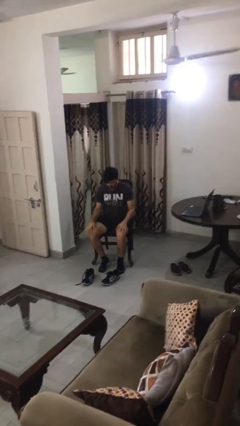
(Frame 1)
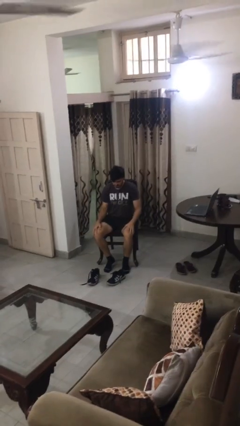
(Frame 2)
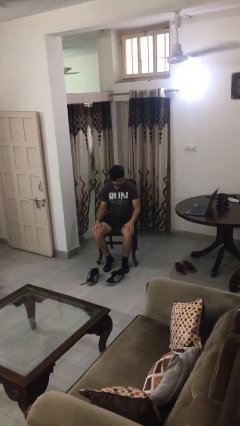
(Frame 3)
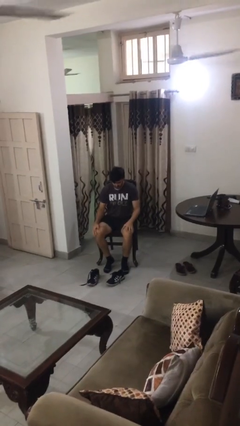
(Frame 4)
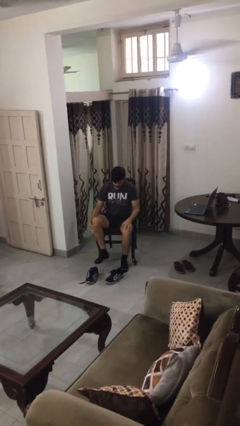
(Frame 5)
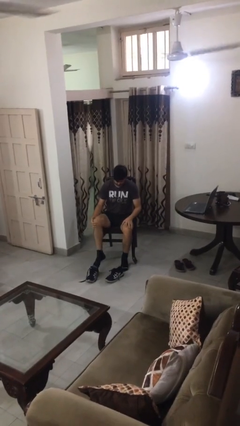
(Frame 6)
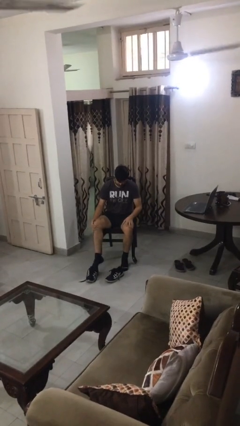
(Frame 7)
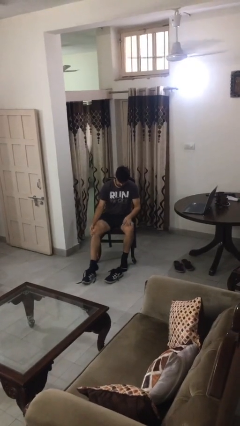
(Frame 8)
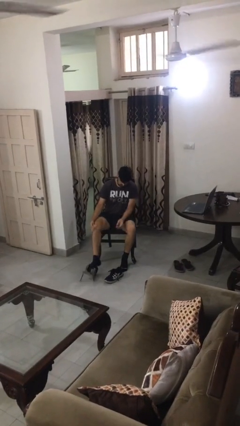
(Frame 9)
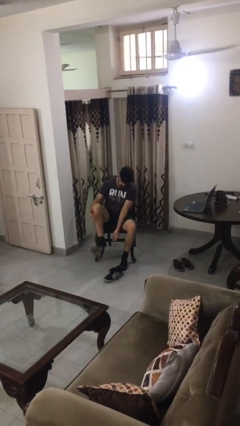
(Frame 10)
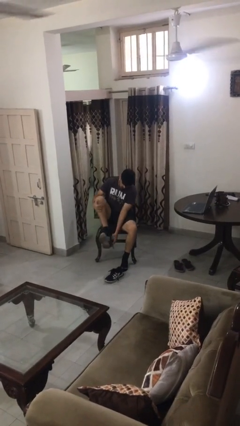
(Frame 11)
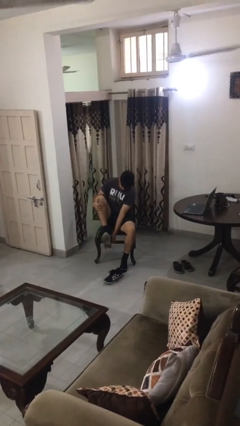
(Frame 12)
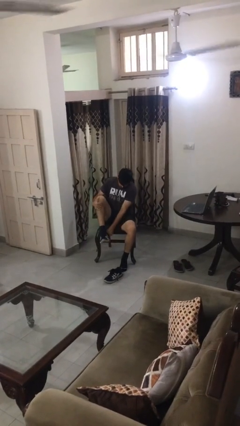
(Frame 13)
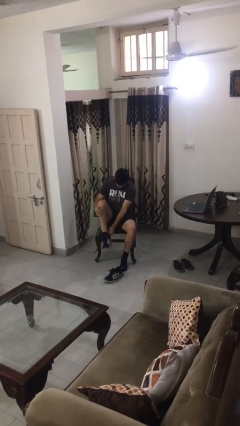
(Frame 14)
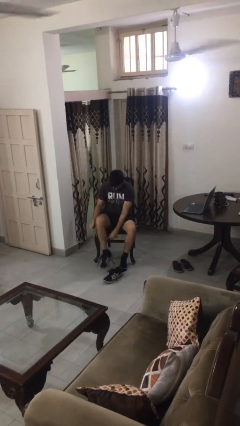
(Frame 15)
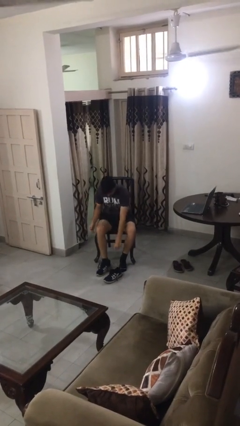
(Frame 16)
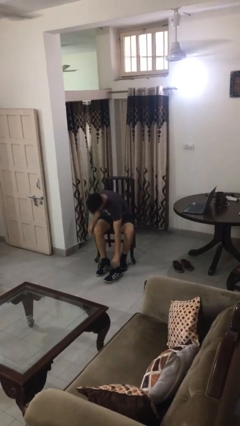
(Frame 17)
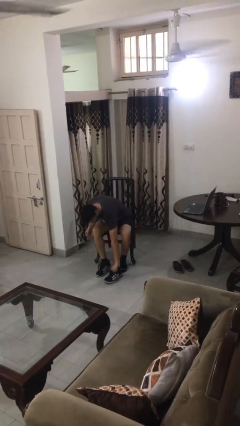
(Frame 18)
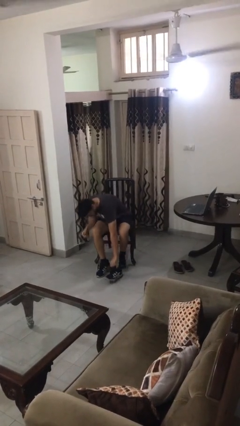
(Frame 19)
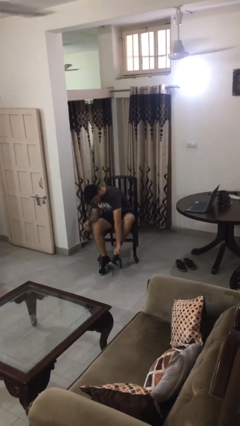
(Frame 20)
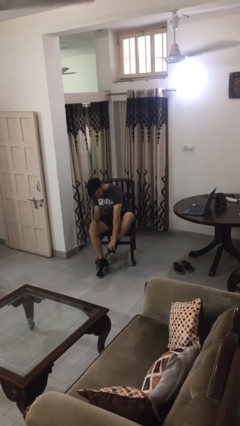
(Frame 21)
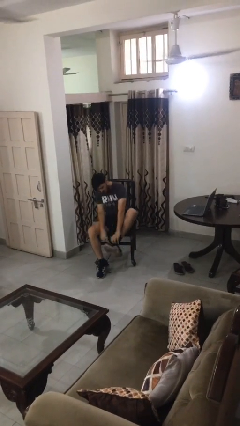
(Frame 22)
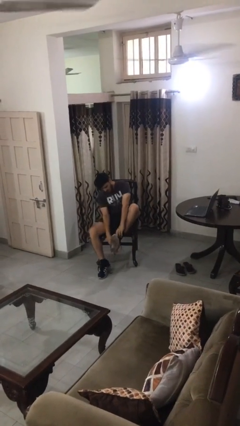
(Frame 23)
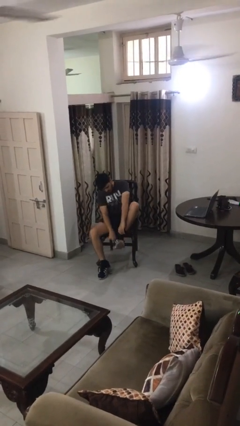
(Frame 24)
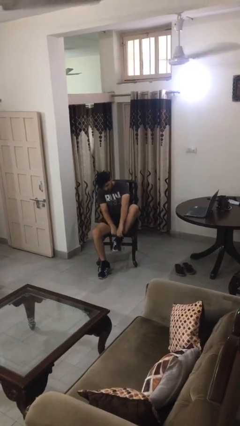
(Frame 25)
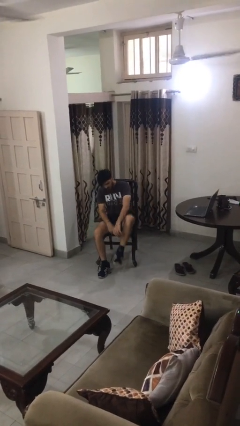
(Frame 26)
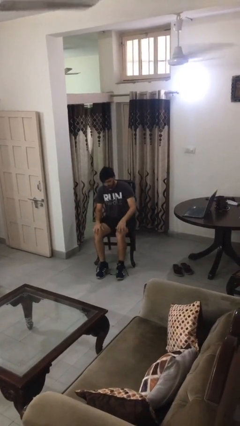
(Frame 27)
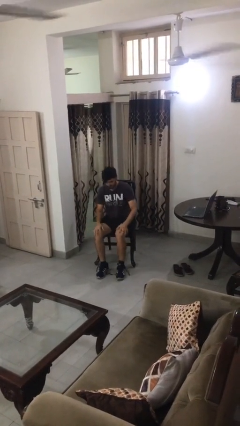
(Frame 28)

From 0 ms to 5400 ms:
person puts on shoes

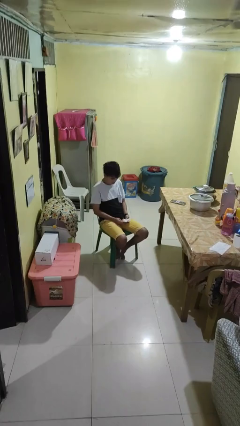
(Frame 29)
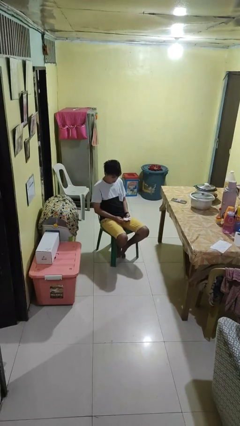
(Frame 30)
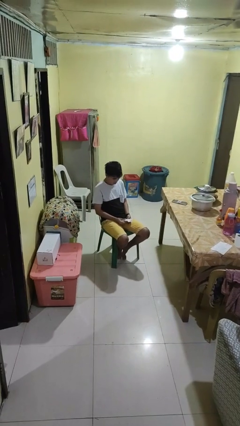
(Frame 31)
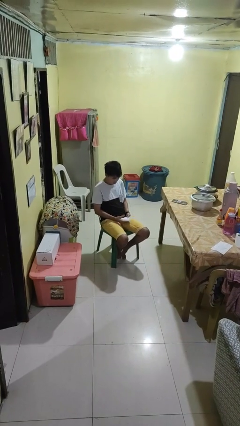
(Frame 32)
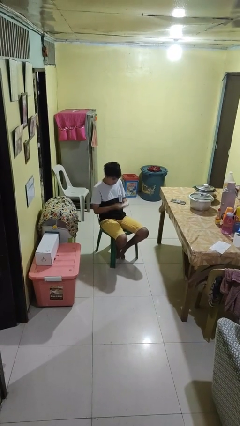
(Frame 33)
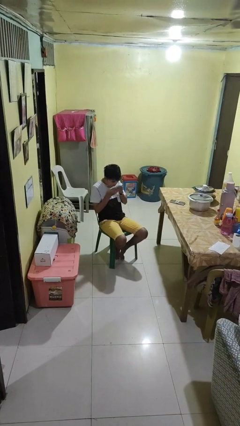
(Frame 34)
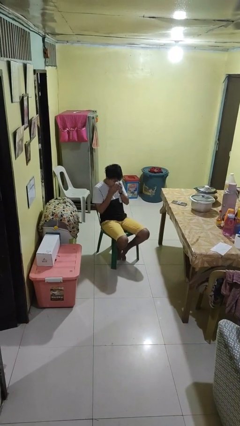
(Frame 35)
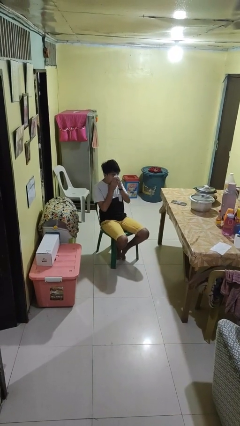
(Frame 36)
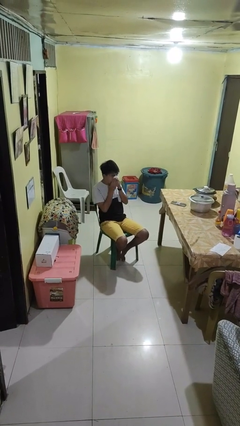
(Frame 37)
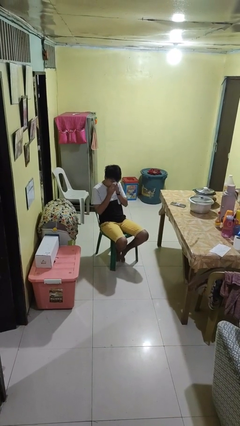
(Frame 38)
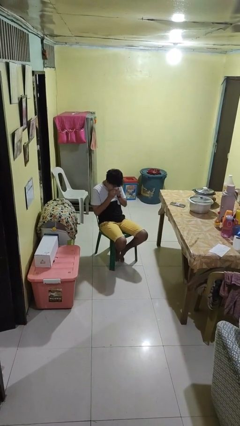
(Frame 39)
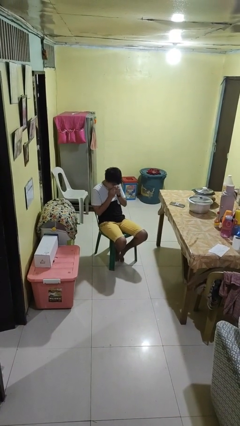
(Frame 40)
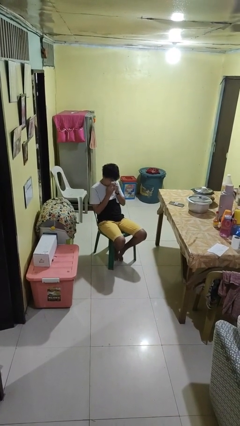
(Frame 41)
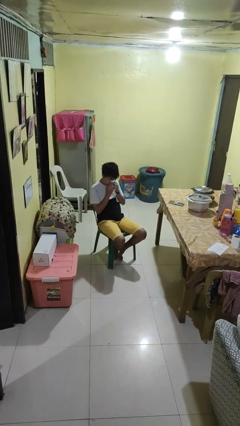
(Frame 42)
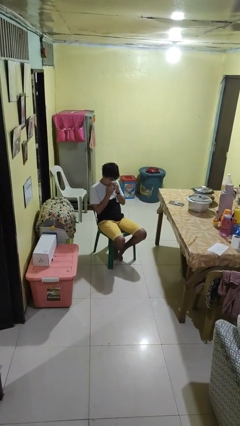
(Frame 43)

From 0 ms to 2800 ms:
person blows nose

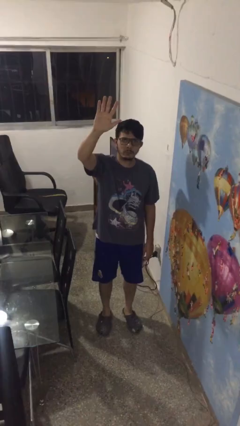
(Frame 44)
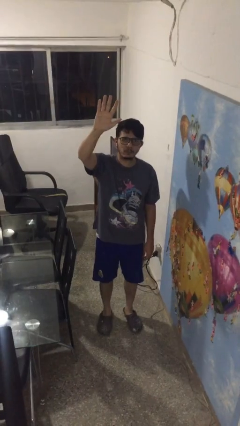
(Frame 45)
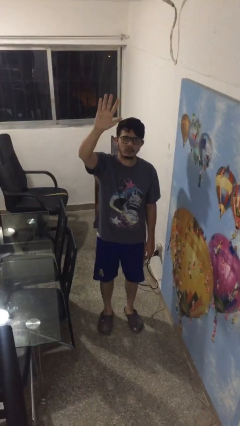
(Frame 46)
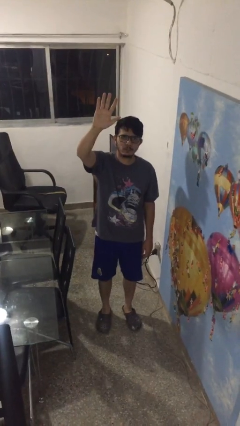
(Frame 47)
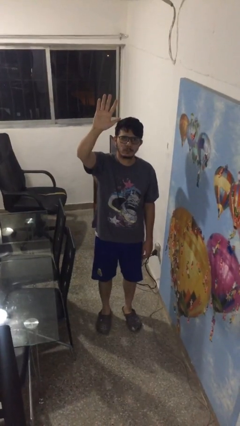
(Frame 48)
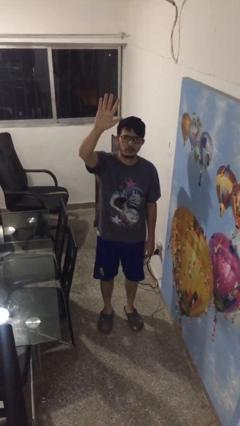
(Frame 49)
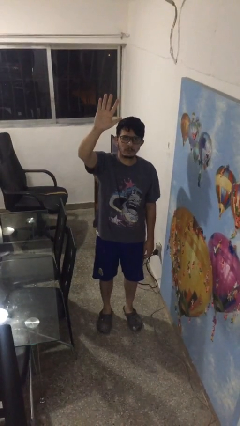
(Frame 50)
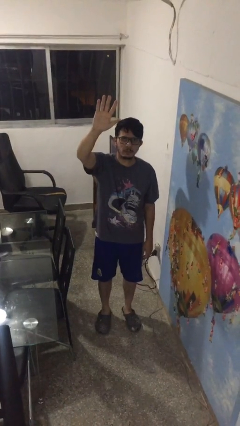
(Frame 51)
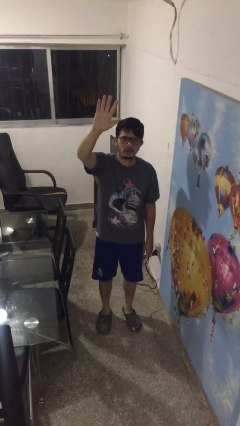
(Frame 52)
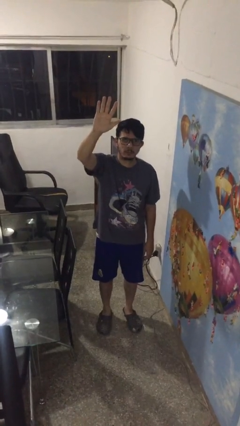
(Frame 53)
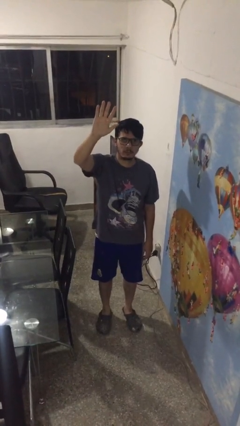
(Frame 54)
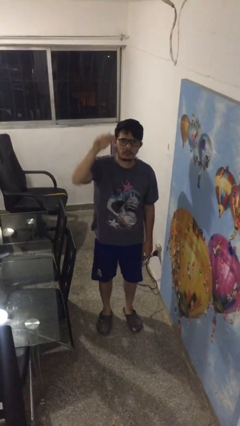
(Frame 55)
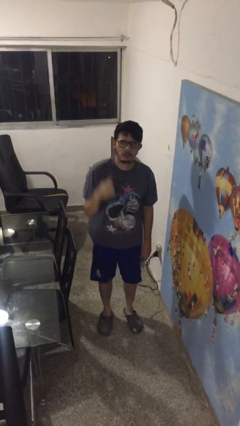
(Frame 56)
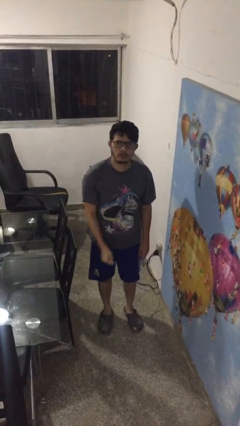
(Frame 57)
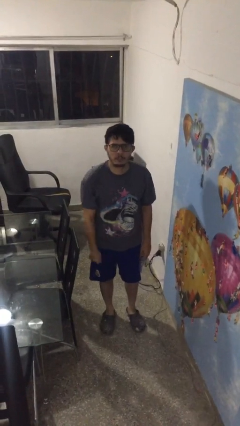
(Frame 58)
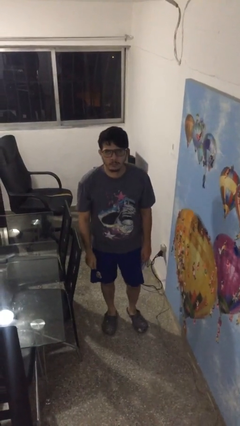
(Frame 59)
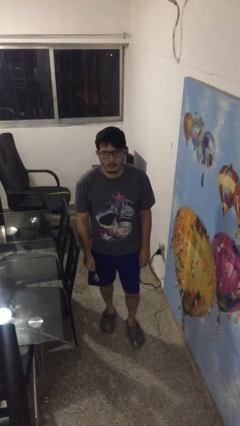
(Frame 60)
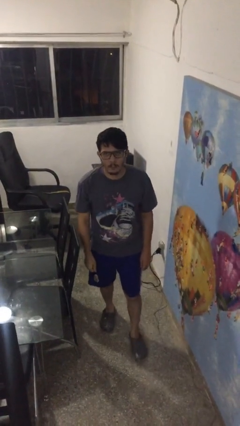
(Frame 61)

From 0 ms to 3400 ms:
person gestures lower hand

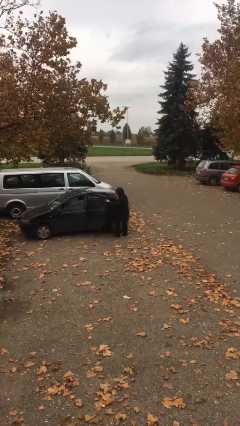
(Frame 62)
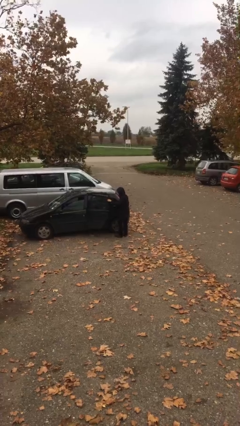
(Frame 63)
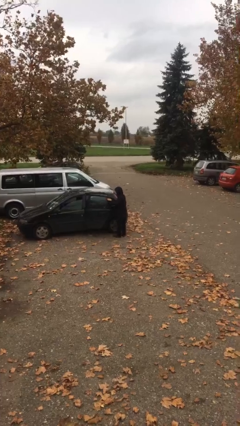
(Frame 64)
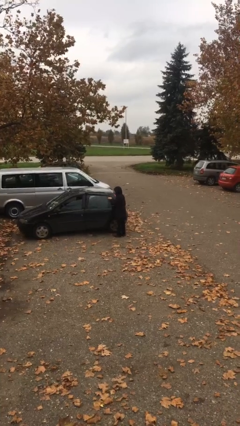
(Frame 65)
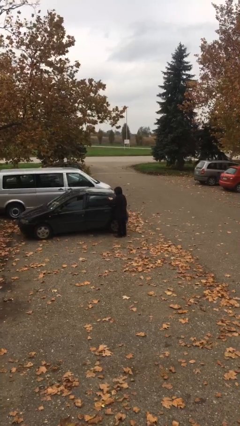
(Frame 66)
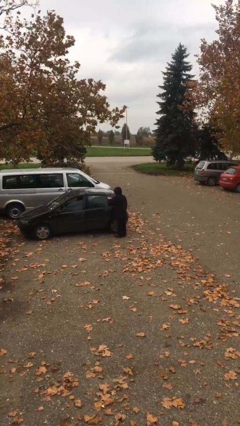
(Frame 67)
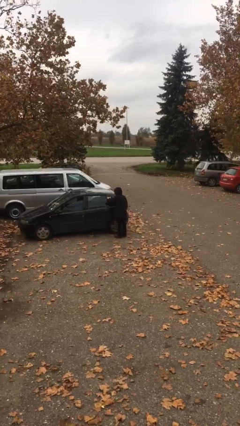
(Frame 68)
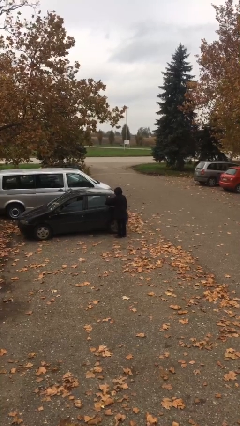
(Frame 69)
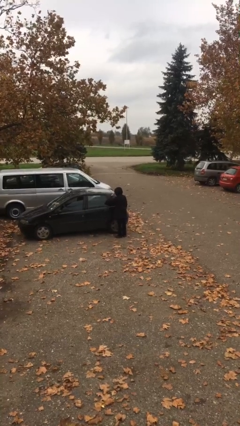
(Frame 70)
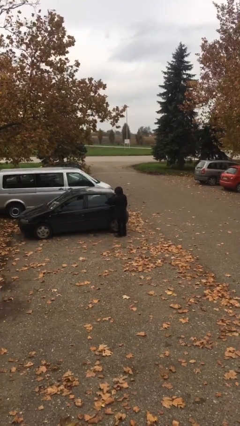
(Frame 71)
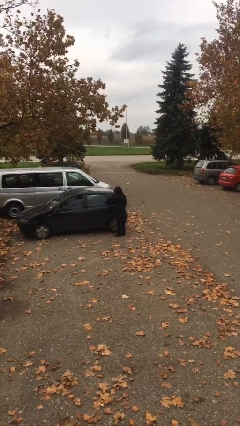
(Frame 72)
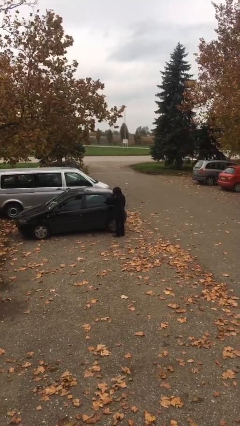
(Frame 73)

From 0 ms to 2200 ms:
person closes car door

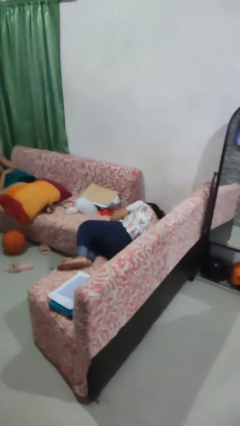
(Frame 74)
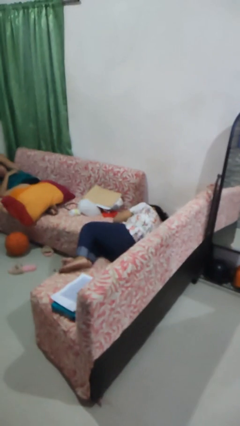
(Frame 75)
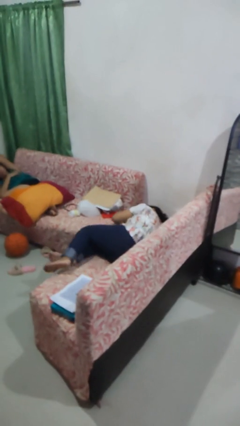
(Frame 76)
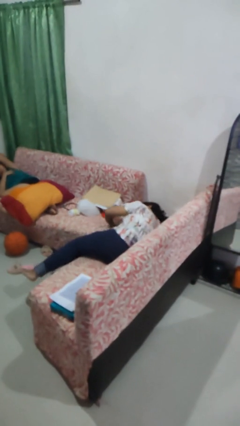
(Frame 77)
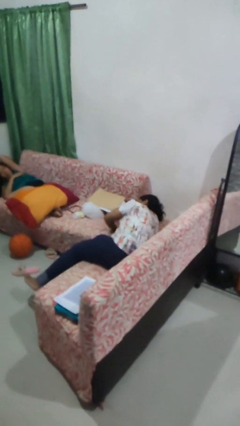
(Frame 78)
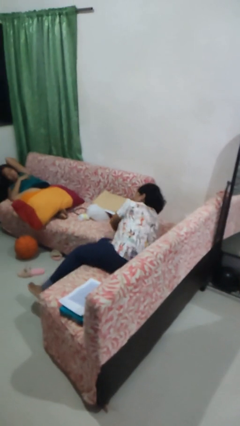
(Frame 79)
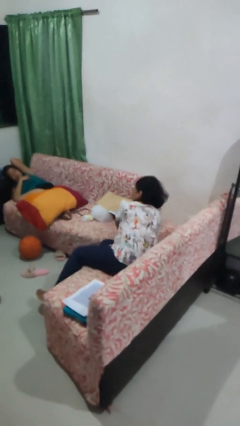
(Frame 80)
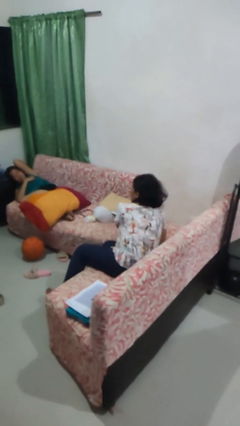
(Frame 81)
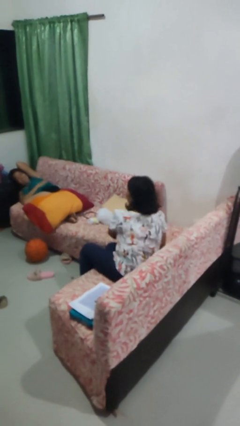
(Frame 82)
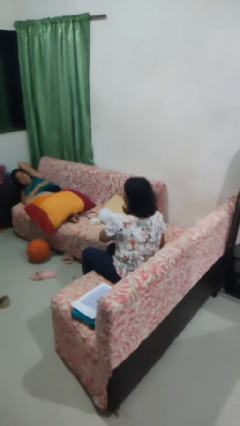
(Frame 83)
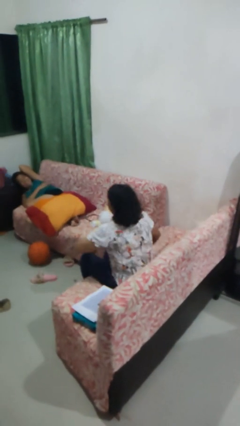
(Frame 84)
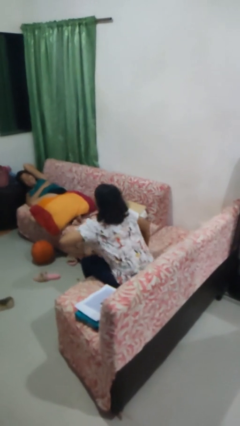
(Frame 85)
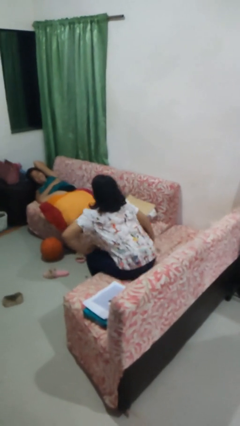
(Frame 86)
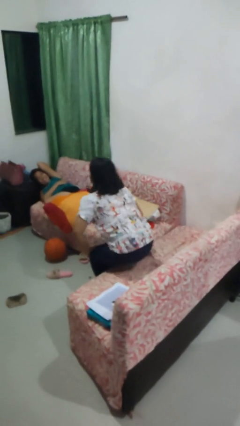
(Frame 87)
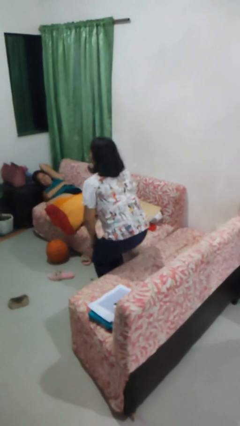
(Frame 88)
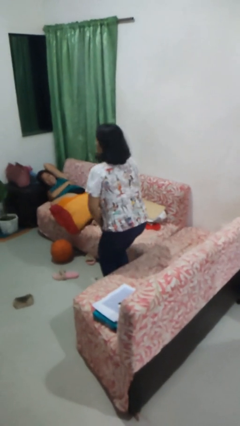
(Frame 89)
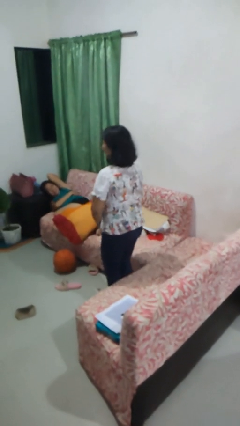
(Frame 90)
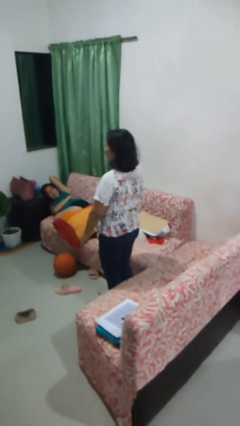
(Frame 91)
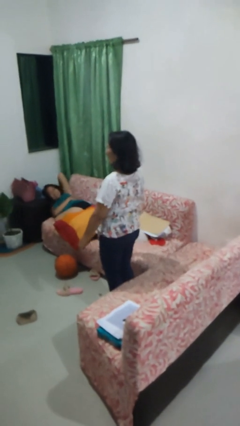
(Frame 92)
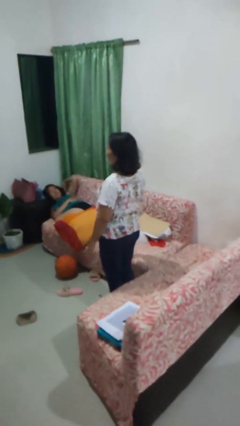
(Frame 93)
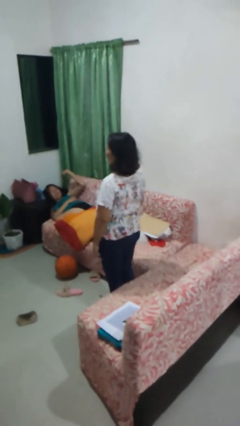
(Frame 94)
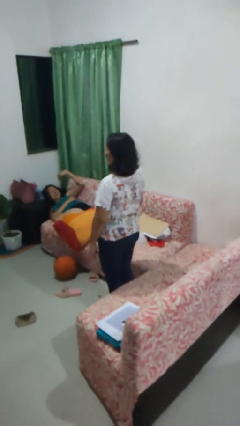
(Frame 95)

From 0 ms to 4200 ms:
person stands up
